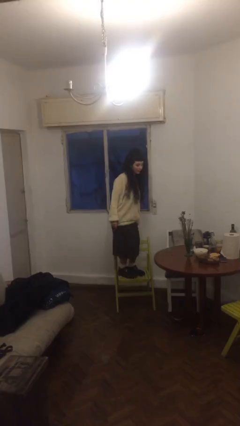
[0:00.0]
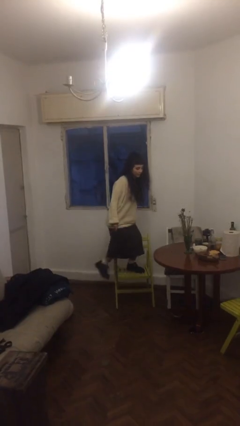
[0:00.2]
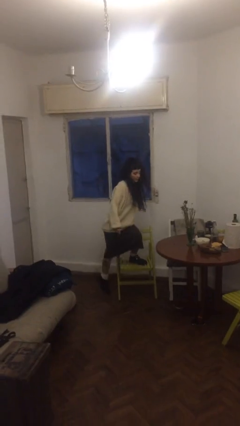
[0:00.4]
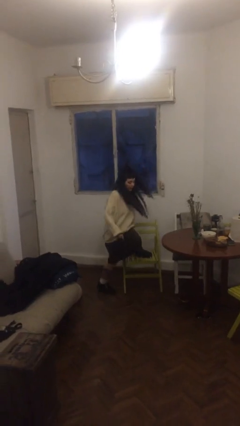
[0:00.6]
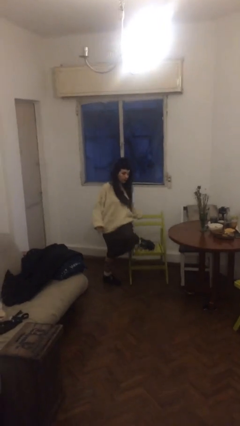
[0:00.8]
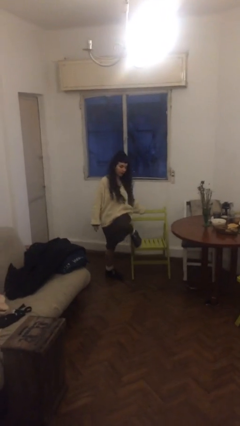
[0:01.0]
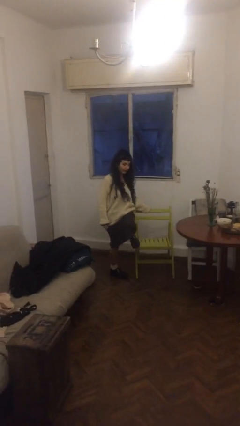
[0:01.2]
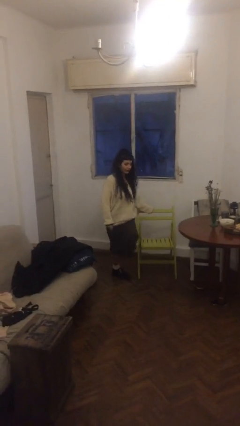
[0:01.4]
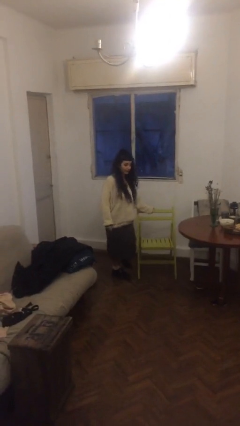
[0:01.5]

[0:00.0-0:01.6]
person climbs off chair

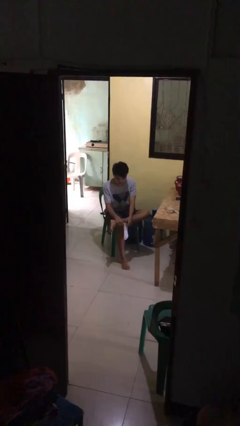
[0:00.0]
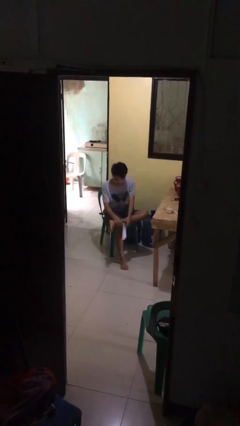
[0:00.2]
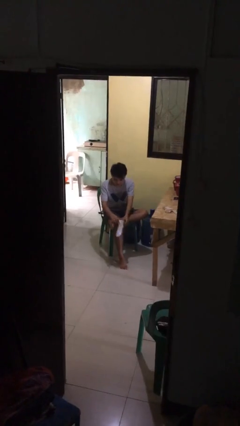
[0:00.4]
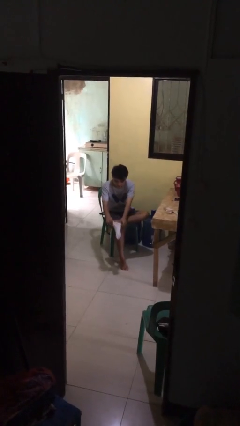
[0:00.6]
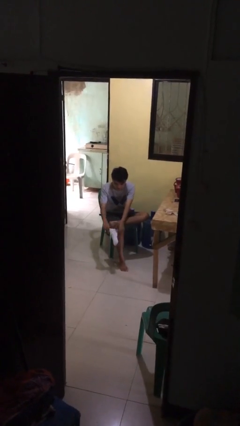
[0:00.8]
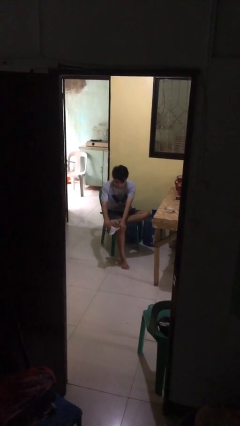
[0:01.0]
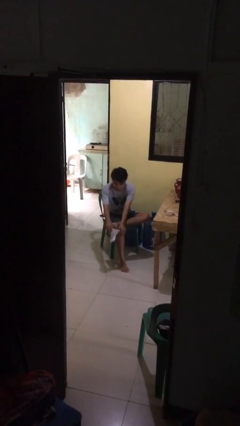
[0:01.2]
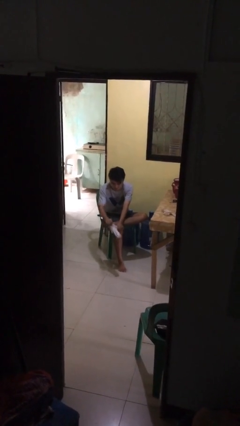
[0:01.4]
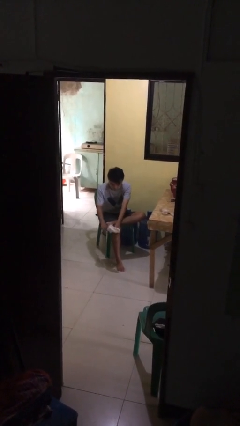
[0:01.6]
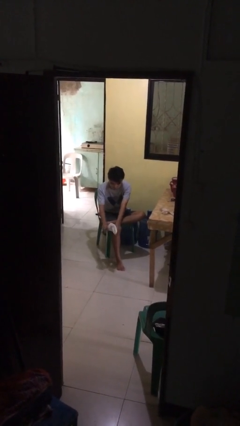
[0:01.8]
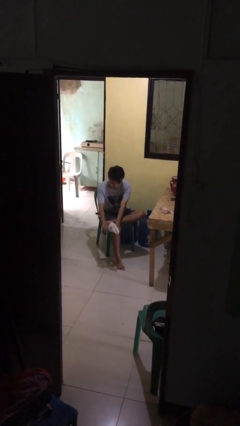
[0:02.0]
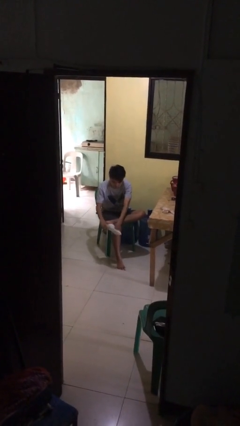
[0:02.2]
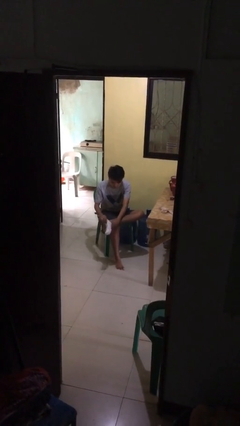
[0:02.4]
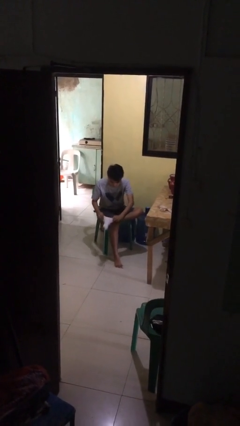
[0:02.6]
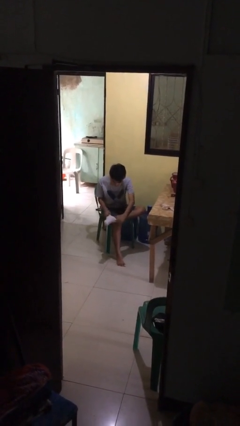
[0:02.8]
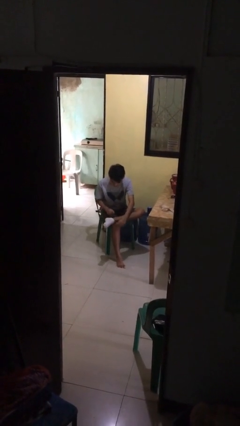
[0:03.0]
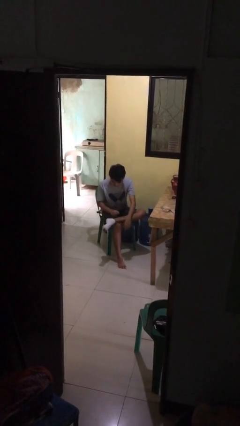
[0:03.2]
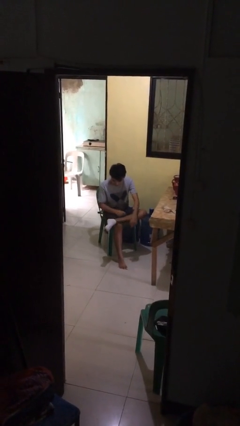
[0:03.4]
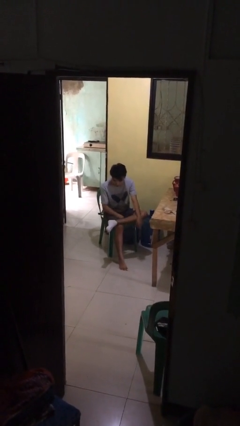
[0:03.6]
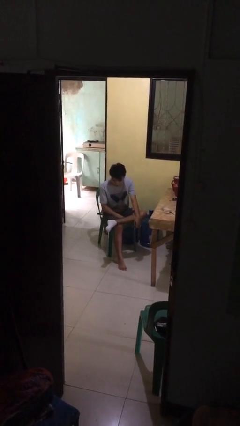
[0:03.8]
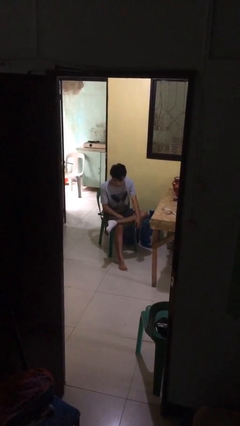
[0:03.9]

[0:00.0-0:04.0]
person puts on socks

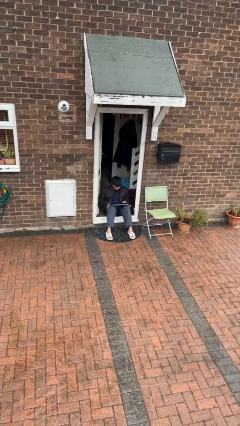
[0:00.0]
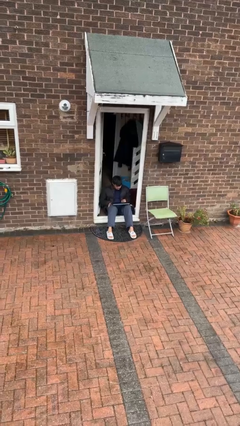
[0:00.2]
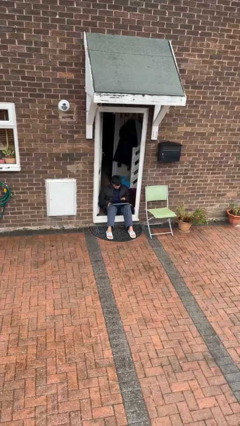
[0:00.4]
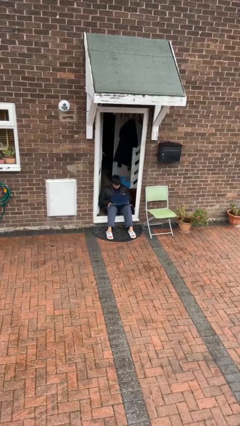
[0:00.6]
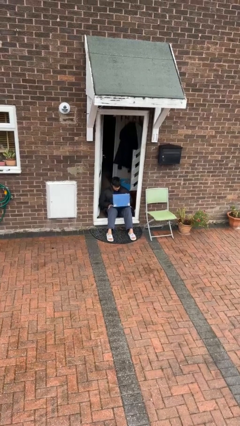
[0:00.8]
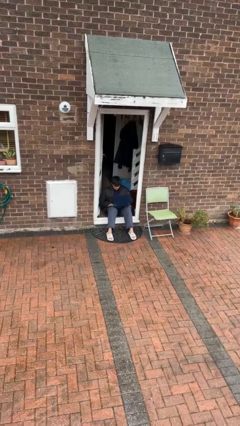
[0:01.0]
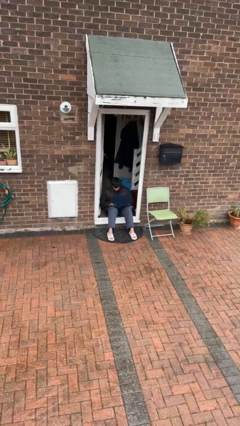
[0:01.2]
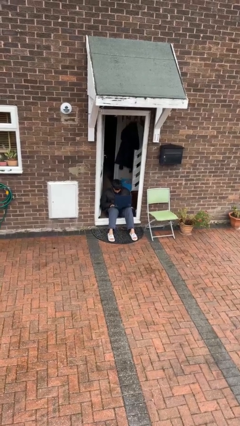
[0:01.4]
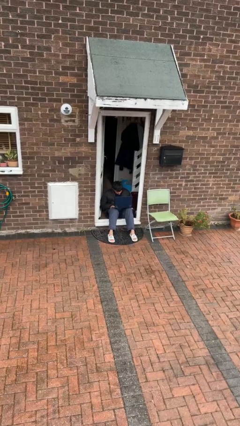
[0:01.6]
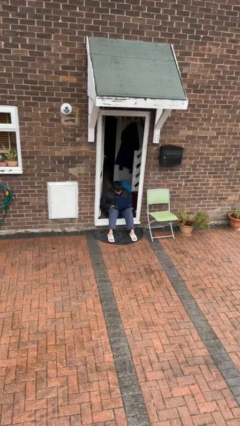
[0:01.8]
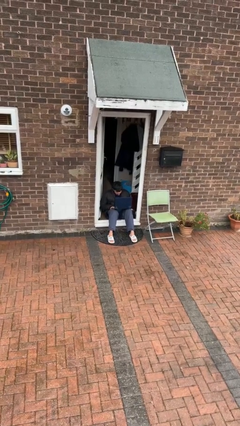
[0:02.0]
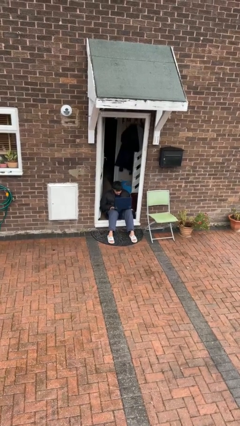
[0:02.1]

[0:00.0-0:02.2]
person opens laptop

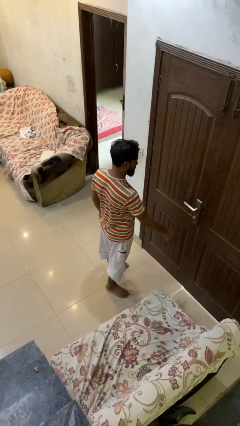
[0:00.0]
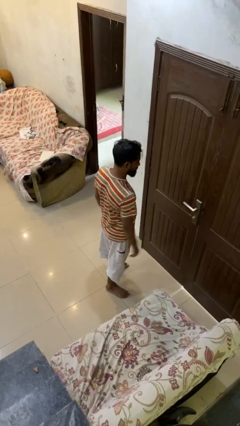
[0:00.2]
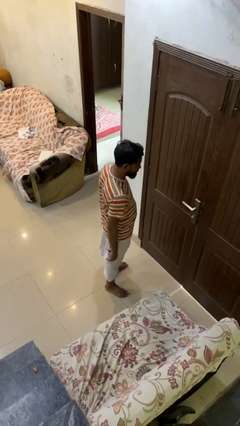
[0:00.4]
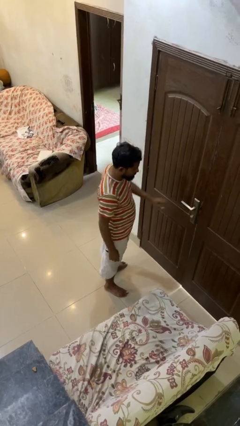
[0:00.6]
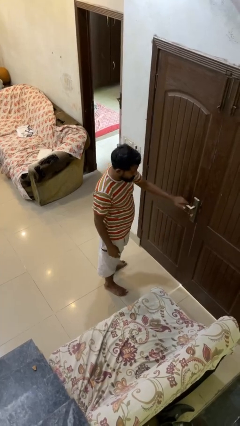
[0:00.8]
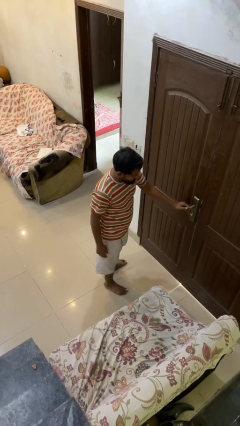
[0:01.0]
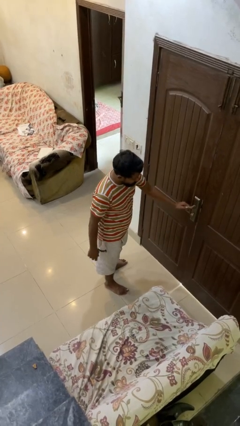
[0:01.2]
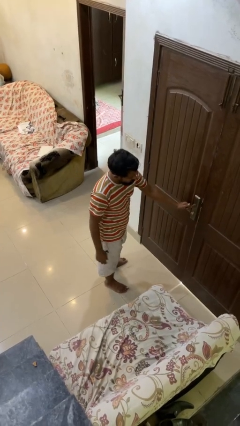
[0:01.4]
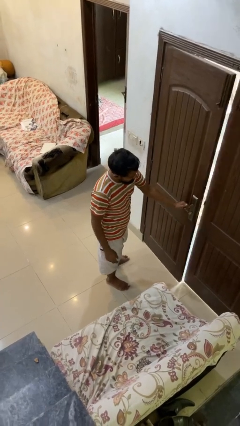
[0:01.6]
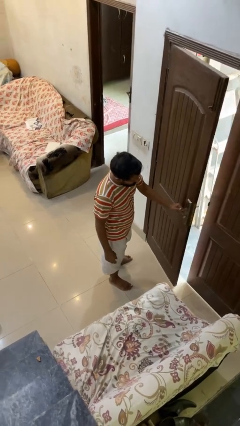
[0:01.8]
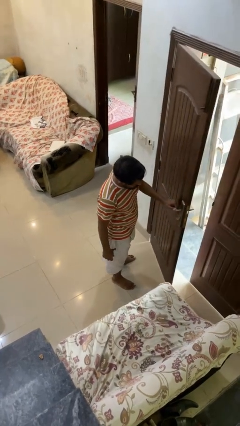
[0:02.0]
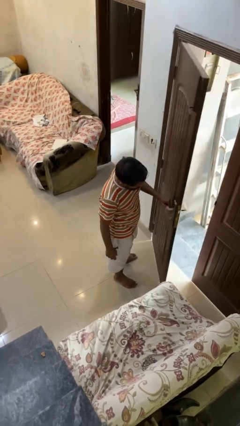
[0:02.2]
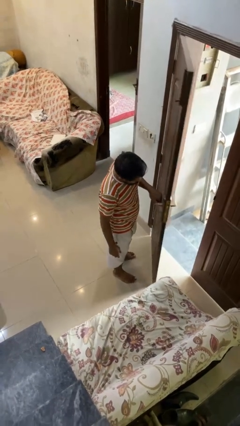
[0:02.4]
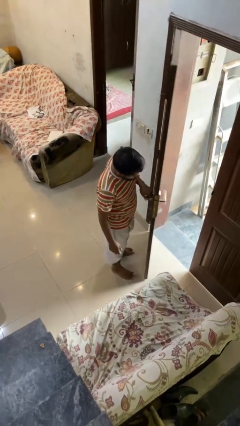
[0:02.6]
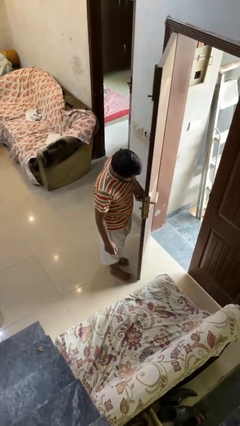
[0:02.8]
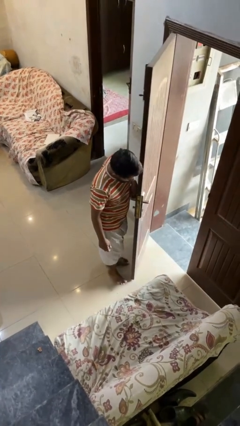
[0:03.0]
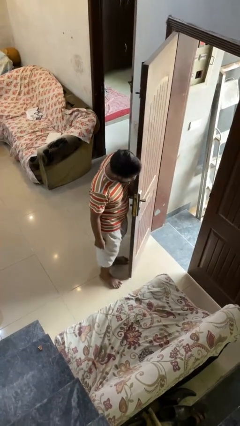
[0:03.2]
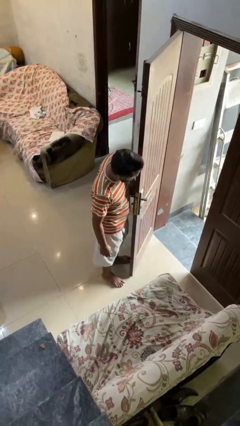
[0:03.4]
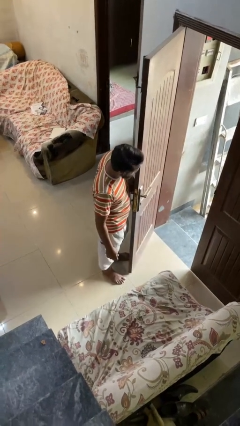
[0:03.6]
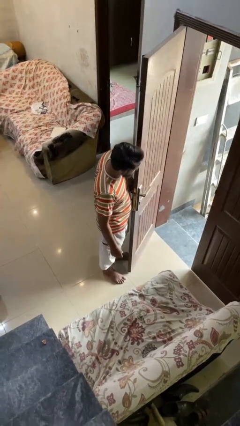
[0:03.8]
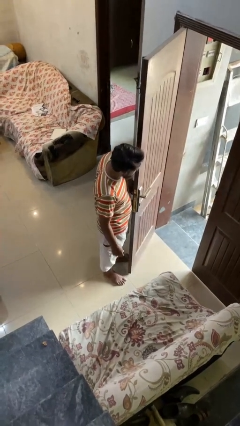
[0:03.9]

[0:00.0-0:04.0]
person opens facility door

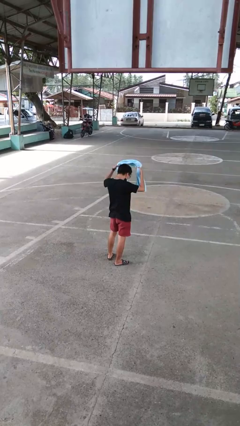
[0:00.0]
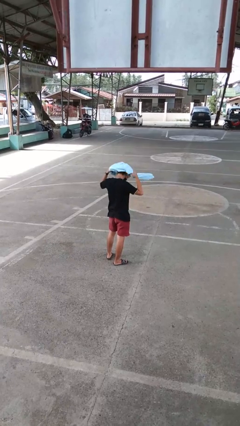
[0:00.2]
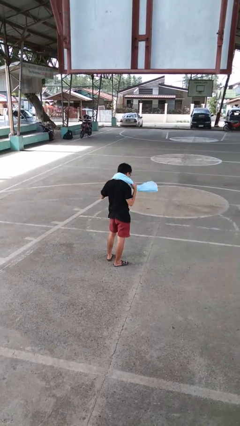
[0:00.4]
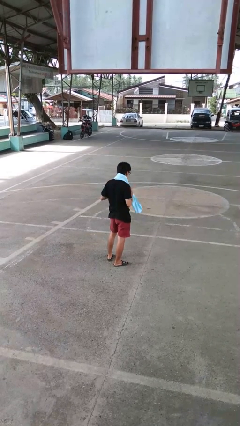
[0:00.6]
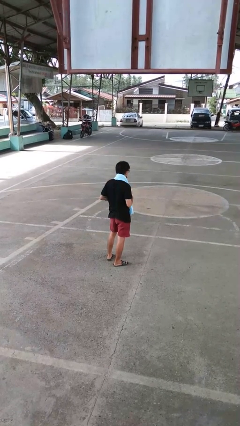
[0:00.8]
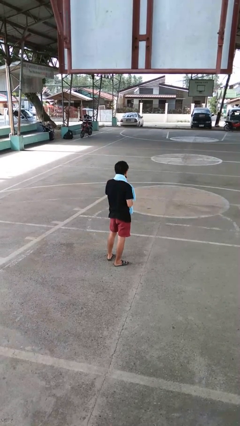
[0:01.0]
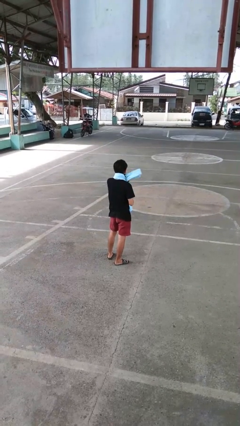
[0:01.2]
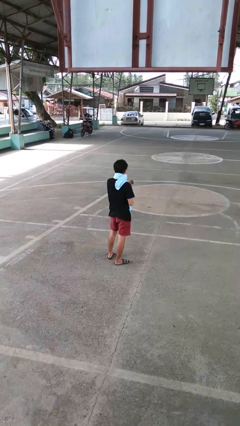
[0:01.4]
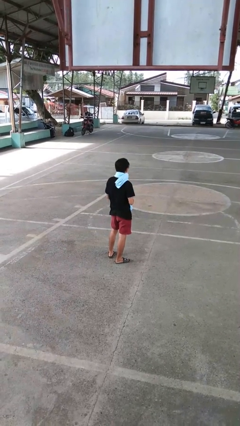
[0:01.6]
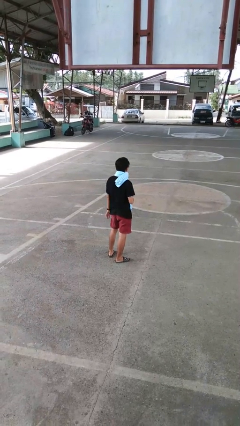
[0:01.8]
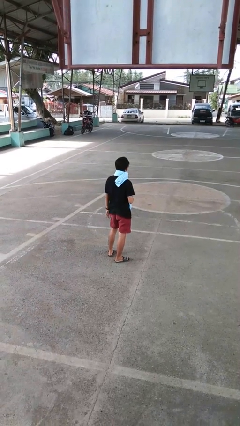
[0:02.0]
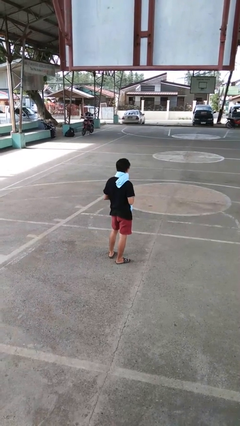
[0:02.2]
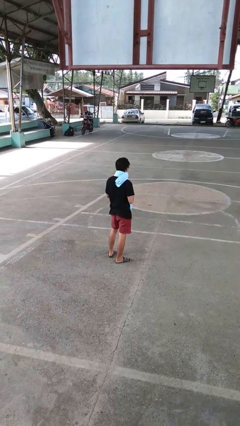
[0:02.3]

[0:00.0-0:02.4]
person puts on scarf

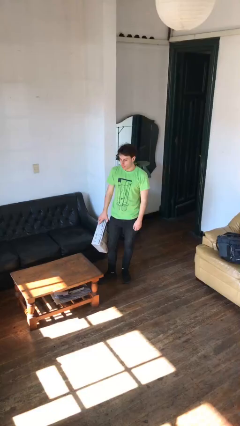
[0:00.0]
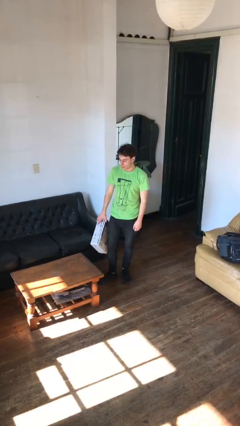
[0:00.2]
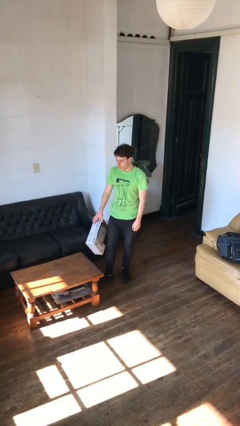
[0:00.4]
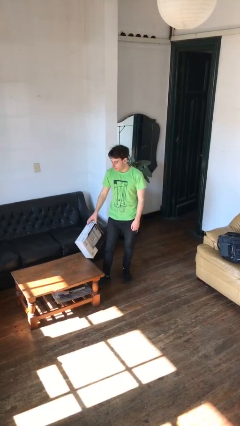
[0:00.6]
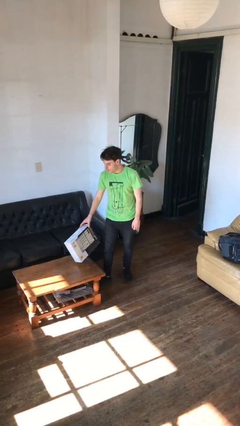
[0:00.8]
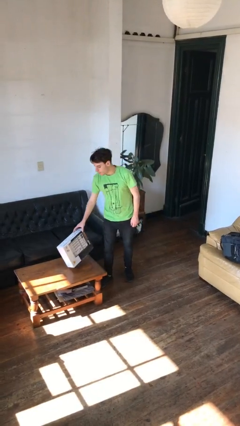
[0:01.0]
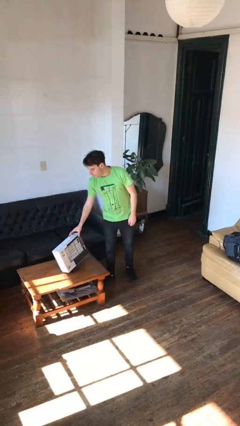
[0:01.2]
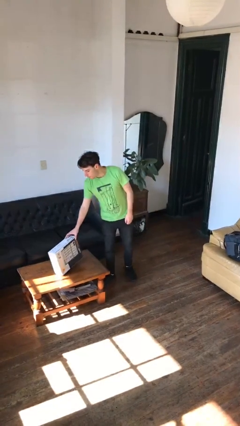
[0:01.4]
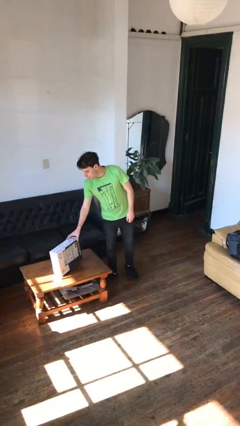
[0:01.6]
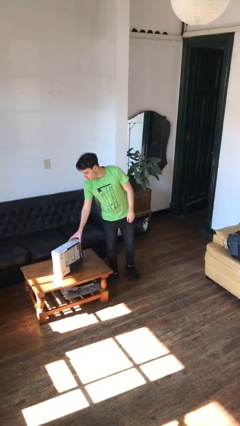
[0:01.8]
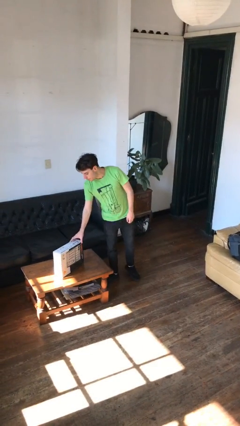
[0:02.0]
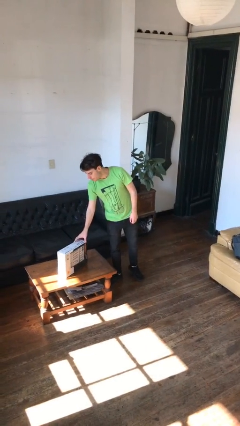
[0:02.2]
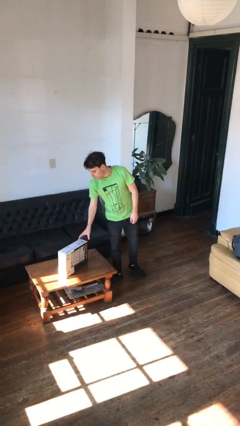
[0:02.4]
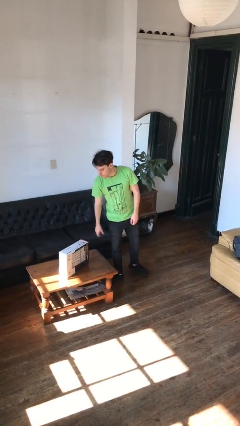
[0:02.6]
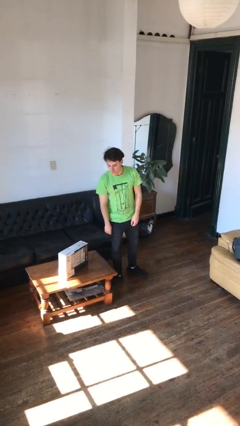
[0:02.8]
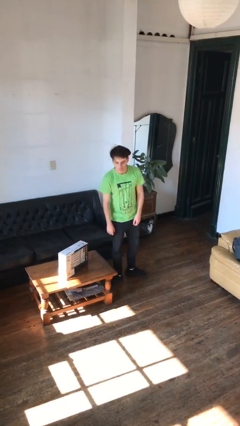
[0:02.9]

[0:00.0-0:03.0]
person puts down object on table
